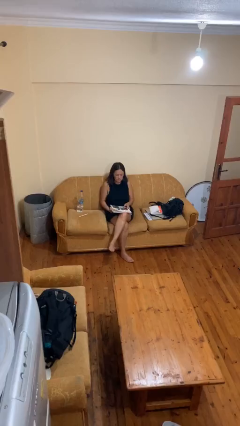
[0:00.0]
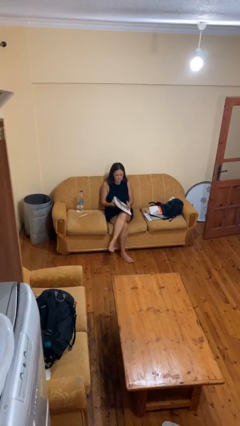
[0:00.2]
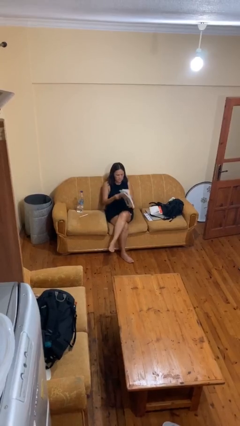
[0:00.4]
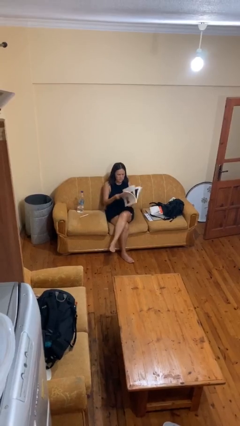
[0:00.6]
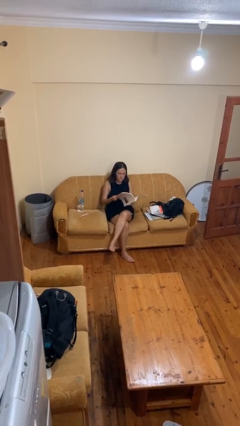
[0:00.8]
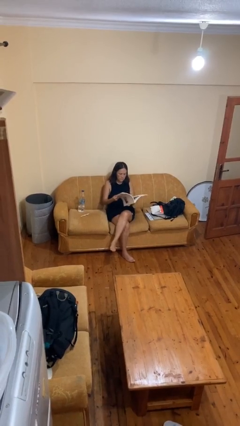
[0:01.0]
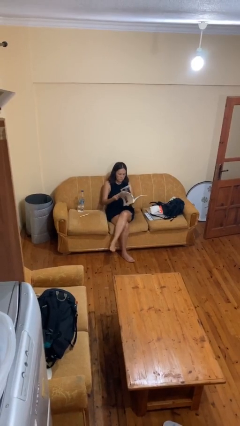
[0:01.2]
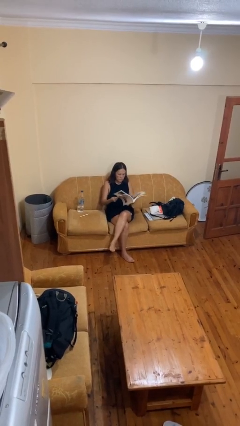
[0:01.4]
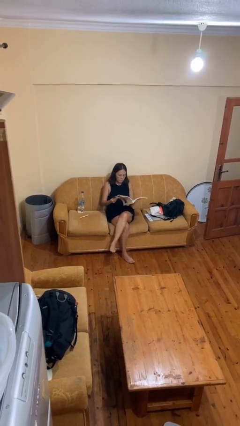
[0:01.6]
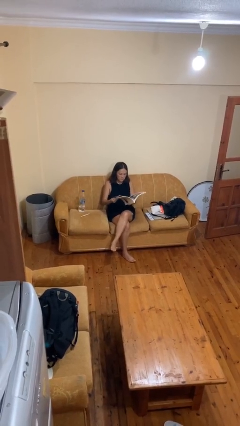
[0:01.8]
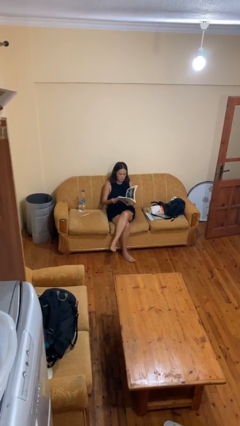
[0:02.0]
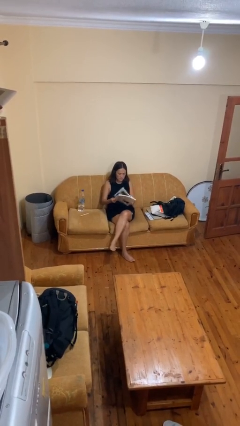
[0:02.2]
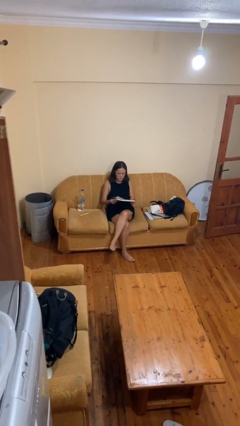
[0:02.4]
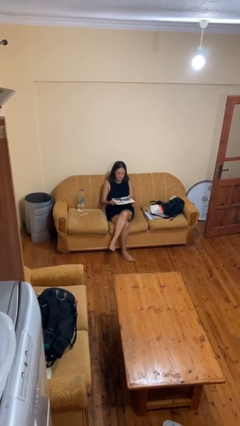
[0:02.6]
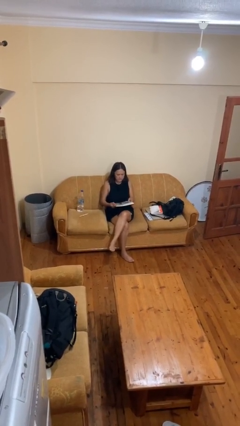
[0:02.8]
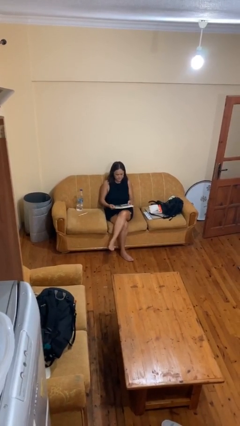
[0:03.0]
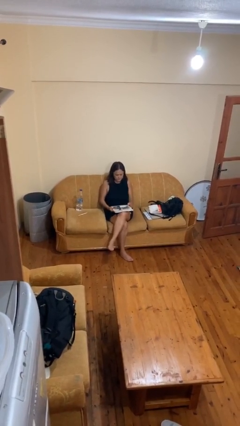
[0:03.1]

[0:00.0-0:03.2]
person reads magazine

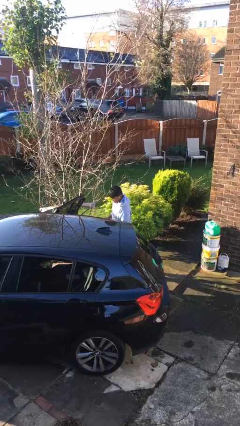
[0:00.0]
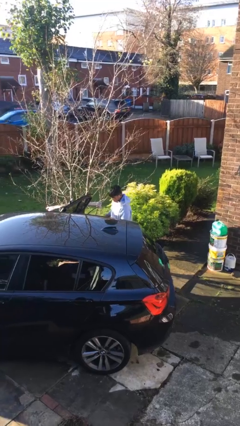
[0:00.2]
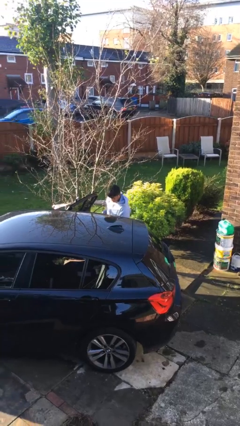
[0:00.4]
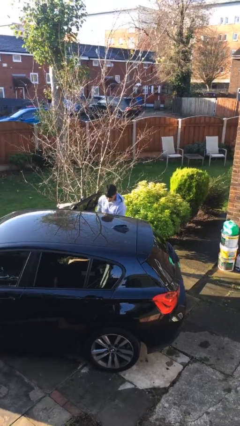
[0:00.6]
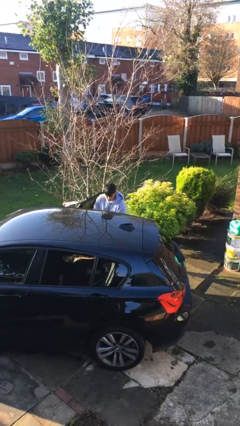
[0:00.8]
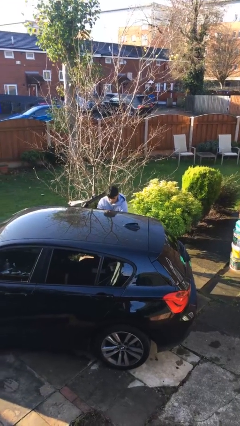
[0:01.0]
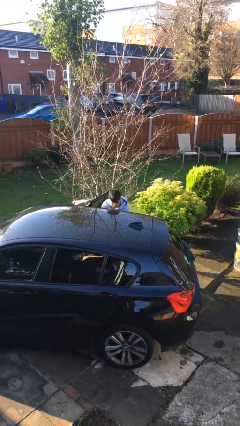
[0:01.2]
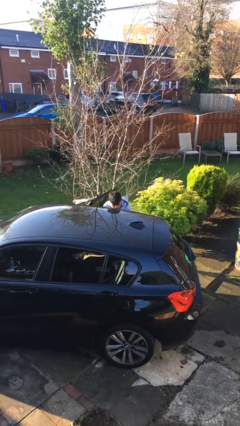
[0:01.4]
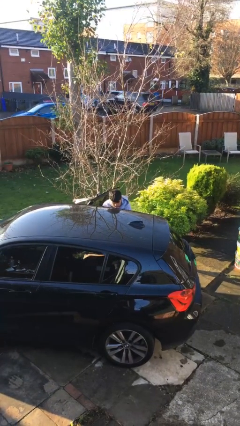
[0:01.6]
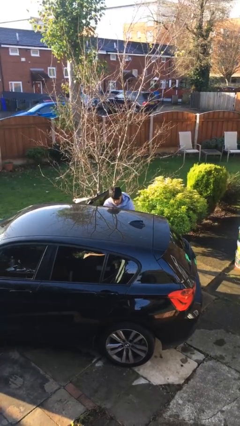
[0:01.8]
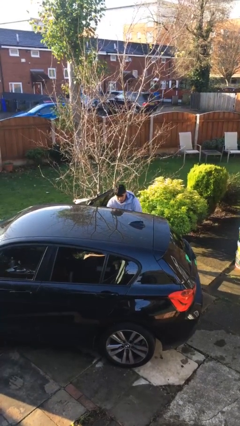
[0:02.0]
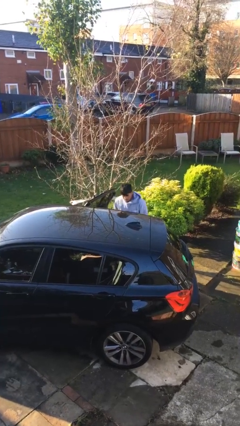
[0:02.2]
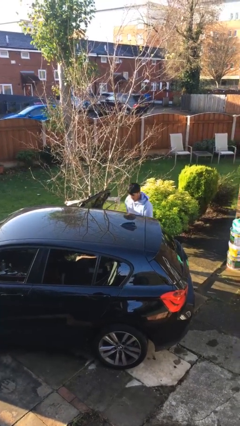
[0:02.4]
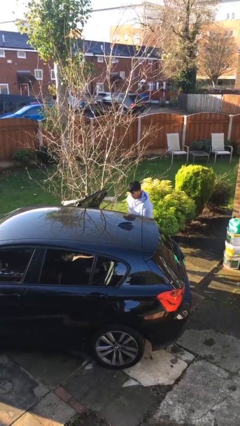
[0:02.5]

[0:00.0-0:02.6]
person loads car

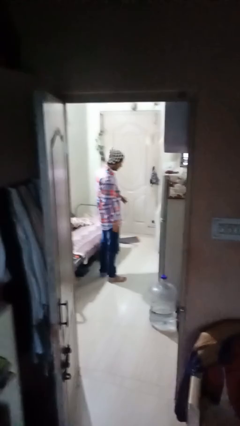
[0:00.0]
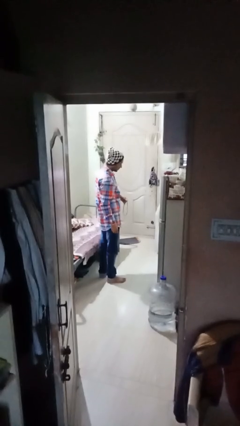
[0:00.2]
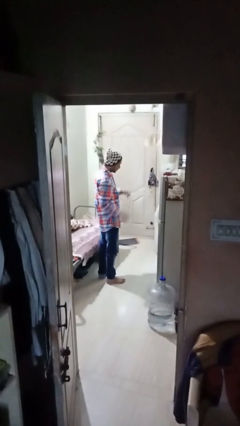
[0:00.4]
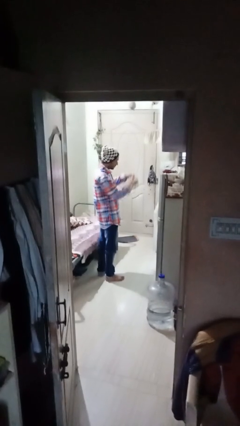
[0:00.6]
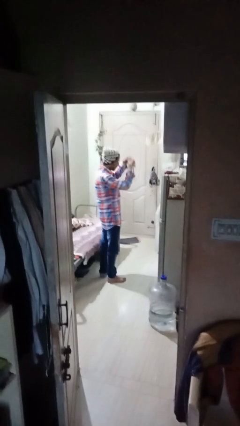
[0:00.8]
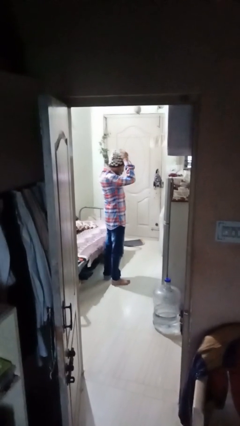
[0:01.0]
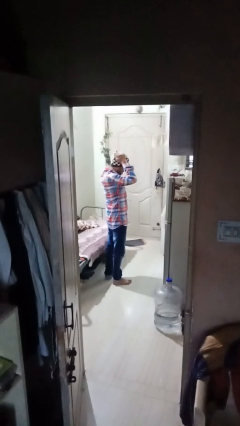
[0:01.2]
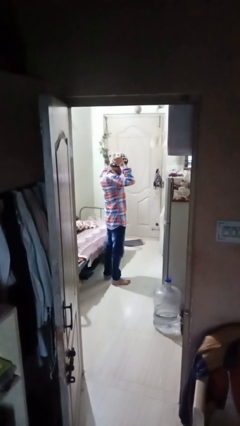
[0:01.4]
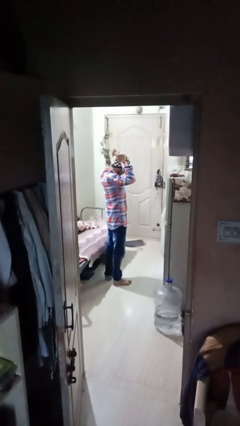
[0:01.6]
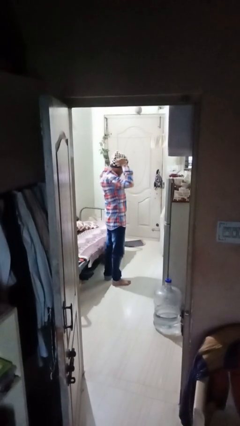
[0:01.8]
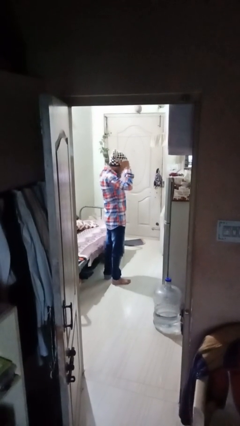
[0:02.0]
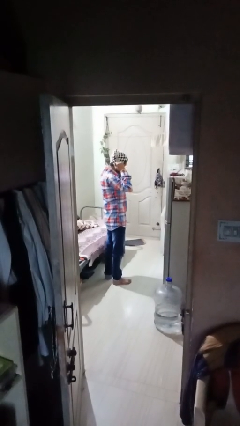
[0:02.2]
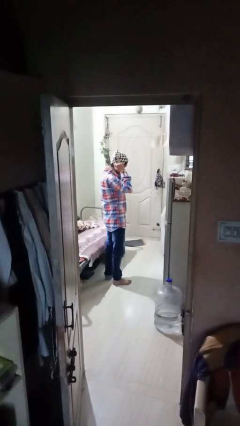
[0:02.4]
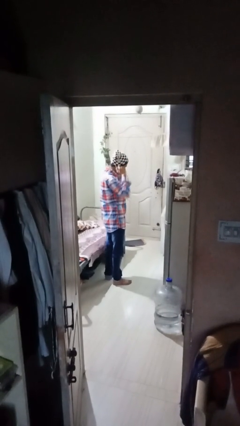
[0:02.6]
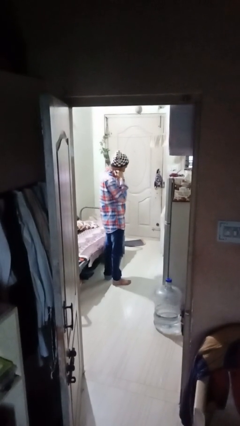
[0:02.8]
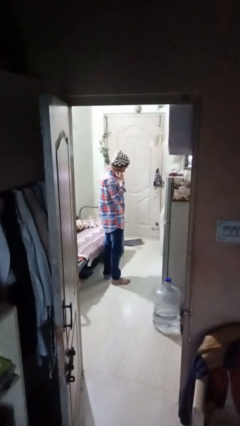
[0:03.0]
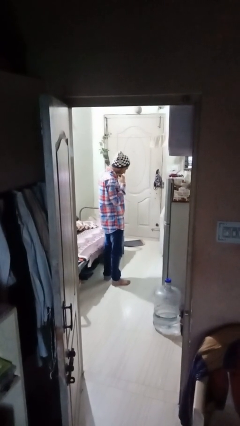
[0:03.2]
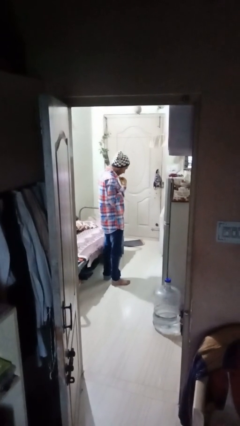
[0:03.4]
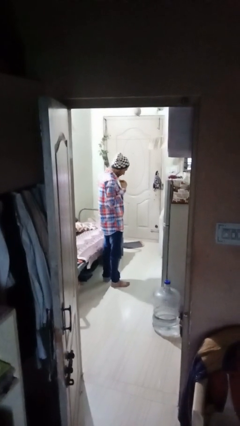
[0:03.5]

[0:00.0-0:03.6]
person puts on necklace

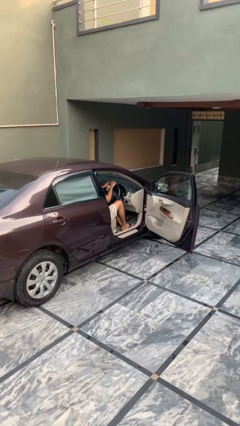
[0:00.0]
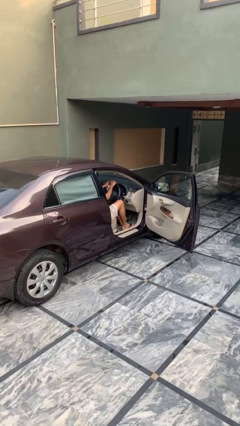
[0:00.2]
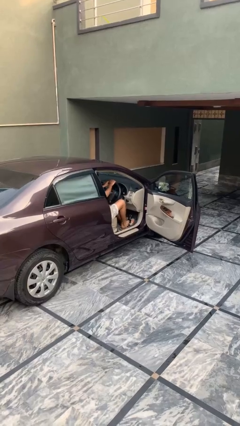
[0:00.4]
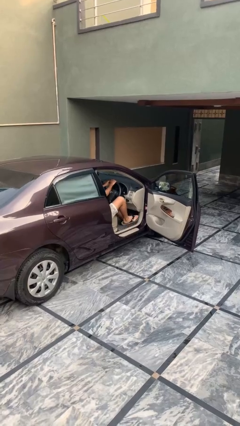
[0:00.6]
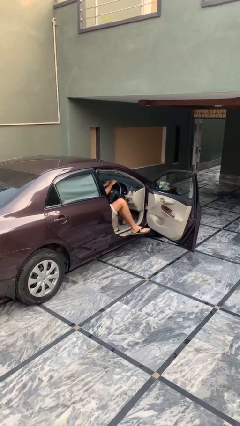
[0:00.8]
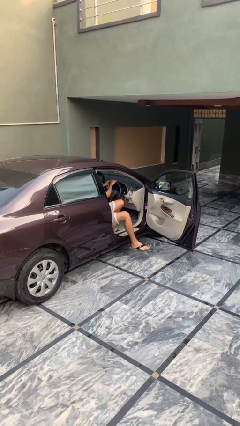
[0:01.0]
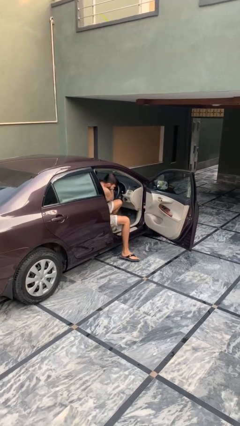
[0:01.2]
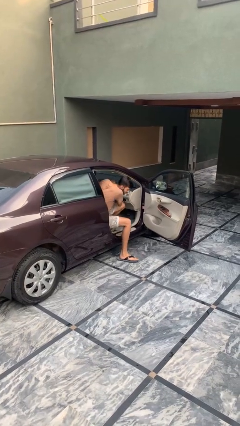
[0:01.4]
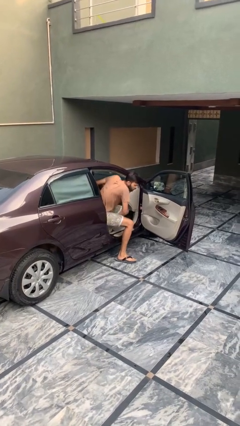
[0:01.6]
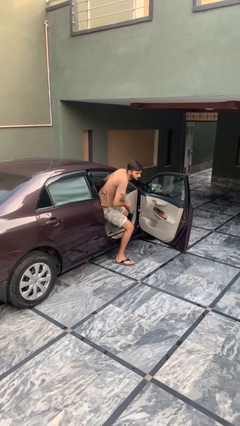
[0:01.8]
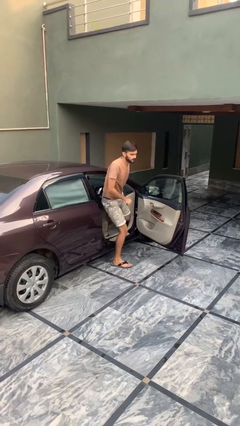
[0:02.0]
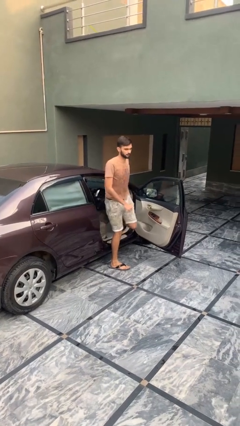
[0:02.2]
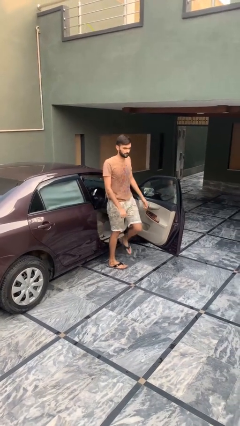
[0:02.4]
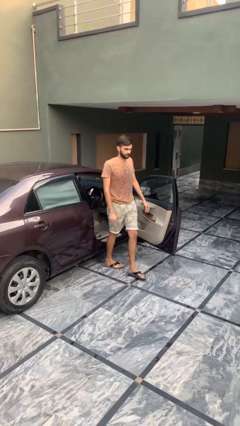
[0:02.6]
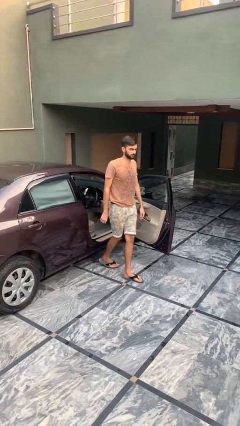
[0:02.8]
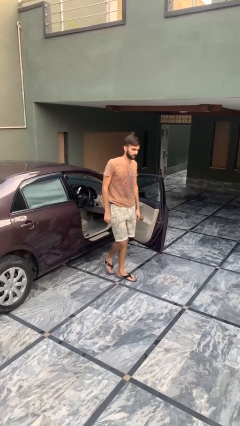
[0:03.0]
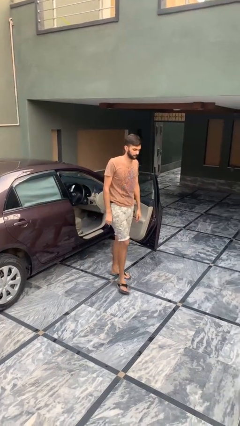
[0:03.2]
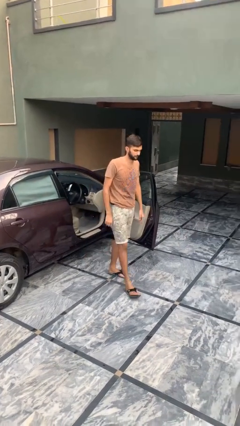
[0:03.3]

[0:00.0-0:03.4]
person exits car

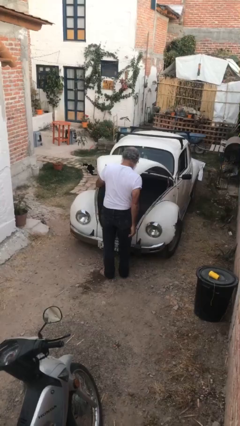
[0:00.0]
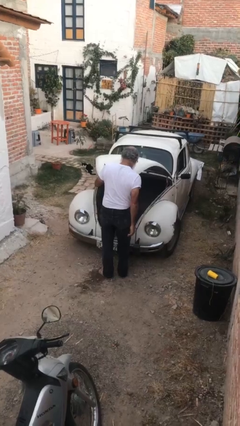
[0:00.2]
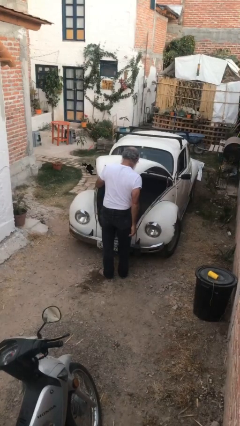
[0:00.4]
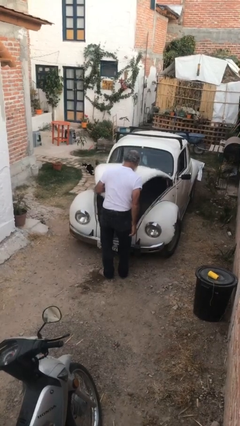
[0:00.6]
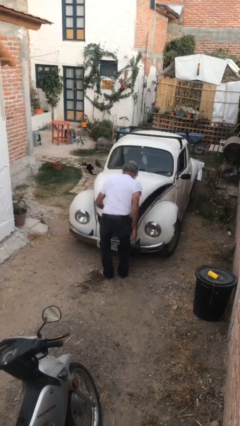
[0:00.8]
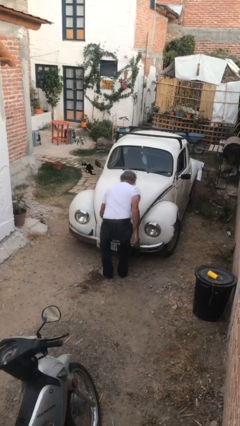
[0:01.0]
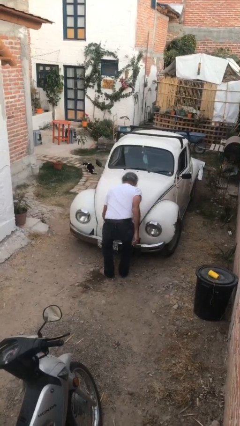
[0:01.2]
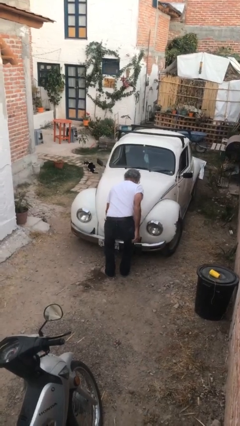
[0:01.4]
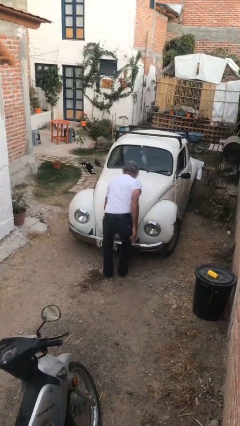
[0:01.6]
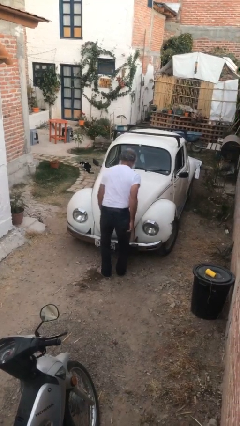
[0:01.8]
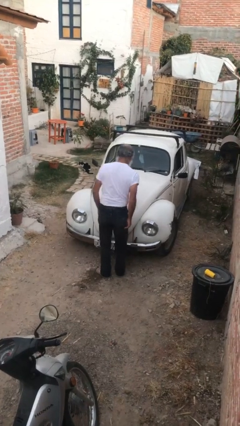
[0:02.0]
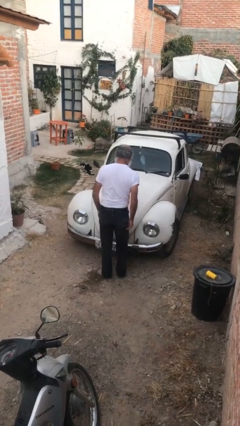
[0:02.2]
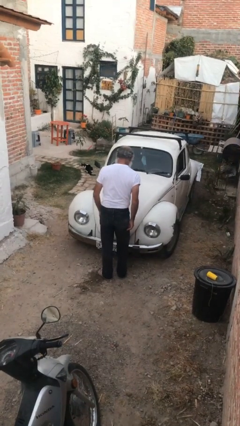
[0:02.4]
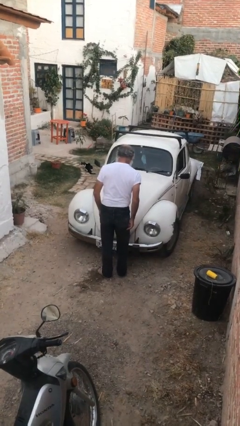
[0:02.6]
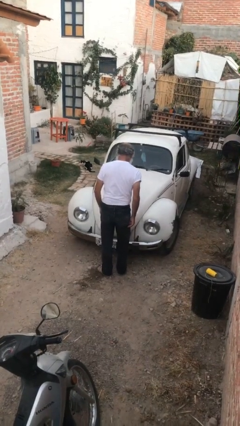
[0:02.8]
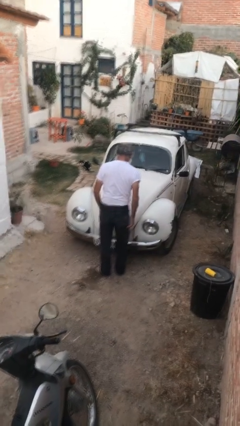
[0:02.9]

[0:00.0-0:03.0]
person closes car trunk

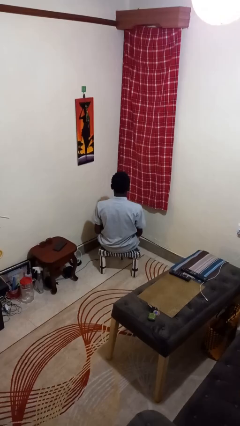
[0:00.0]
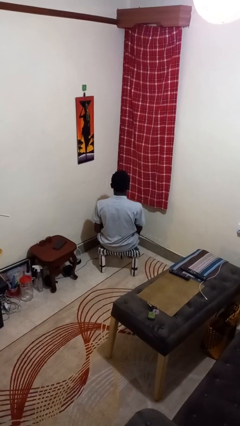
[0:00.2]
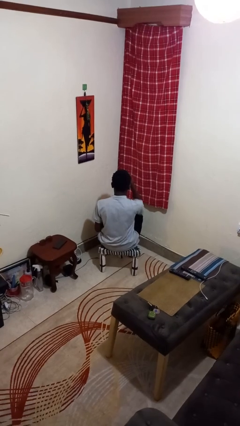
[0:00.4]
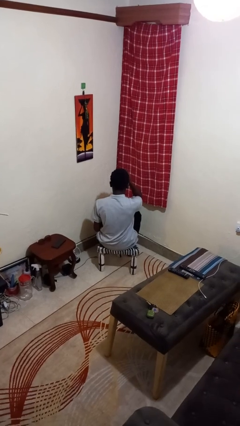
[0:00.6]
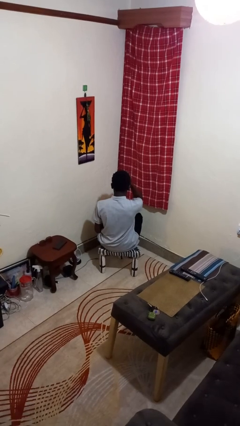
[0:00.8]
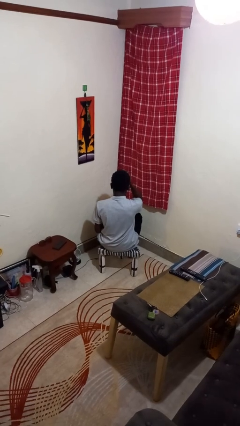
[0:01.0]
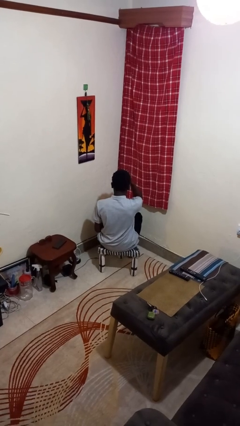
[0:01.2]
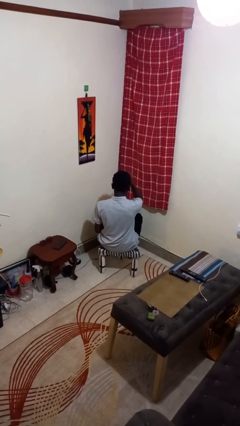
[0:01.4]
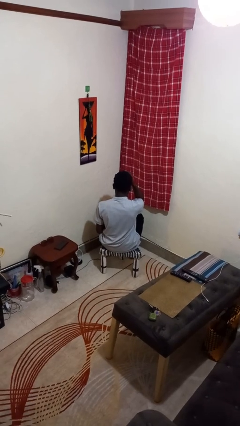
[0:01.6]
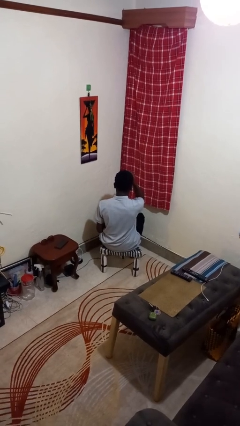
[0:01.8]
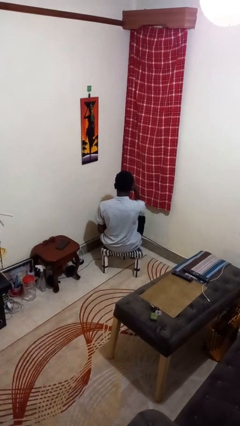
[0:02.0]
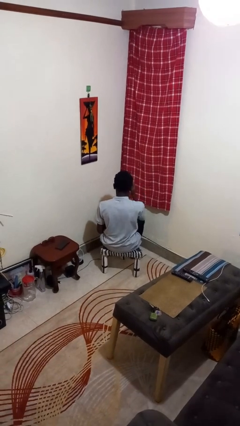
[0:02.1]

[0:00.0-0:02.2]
person scratches face
